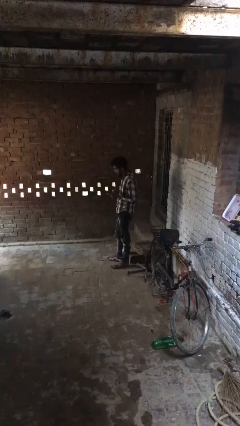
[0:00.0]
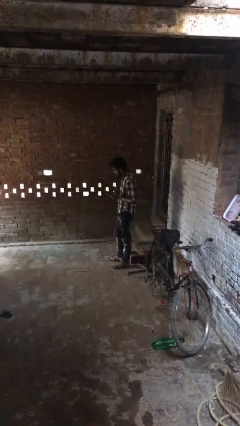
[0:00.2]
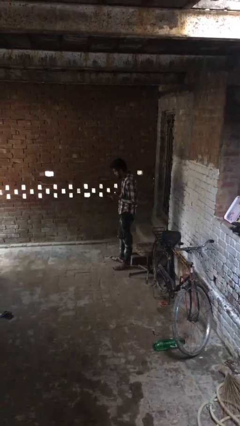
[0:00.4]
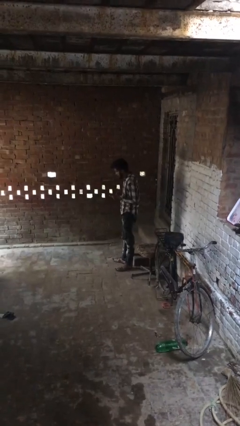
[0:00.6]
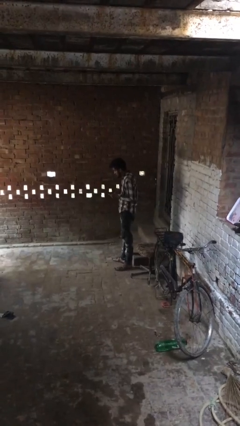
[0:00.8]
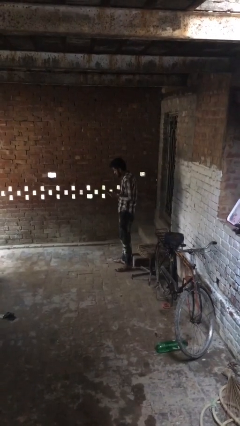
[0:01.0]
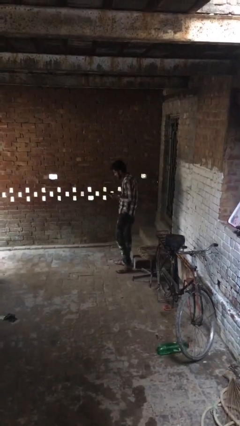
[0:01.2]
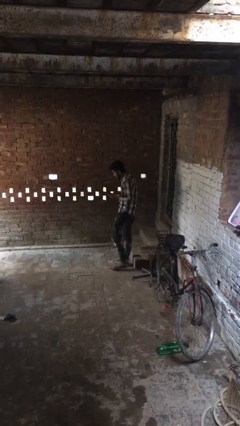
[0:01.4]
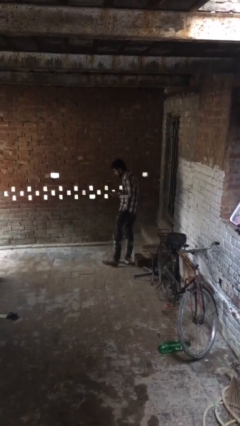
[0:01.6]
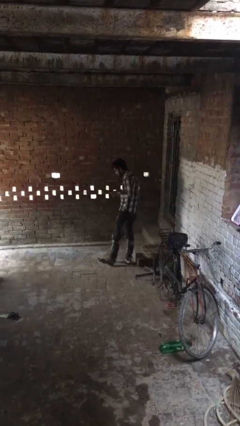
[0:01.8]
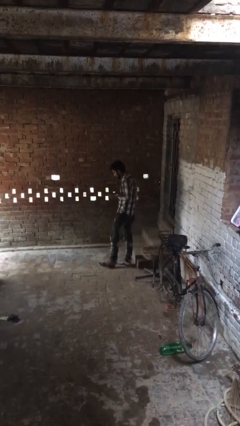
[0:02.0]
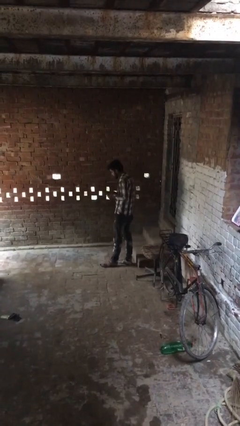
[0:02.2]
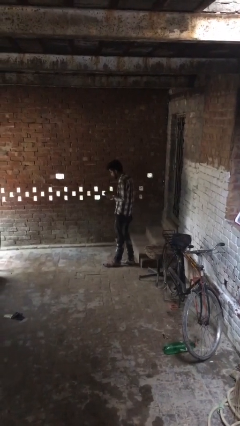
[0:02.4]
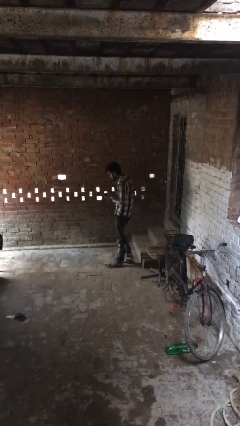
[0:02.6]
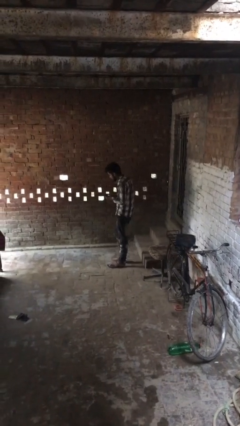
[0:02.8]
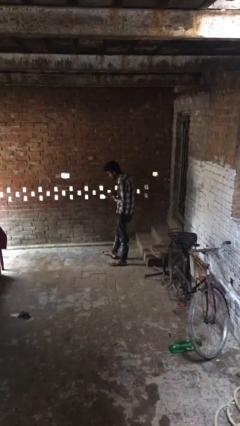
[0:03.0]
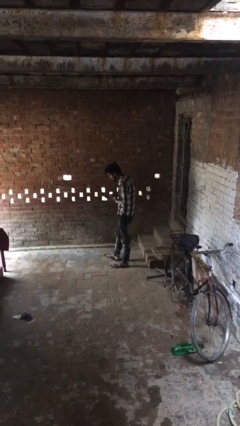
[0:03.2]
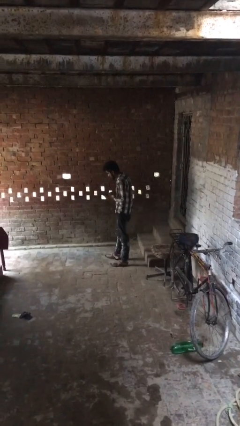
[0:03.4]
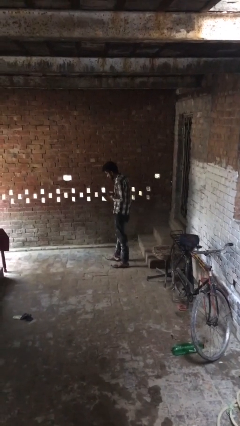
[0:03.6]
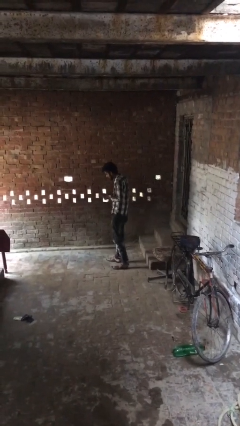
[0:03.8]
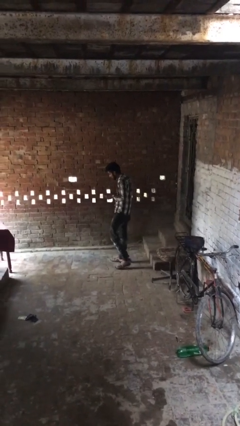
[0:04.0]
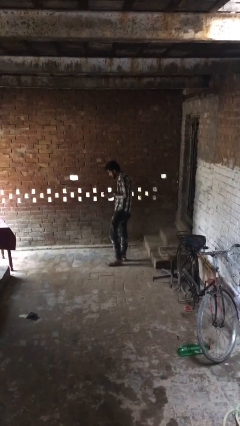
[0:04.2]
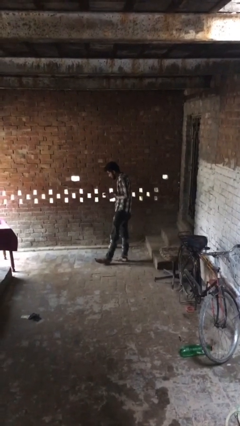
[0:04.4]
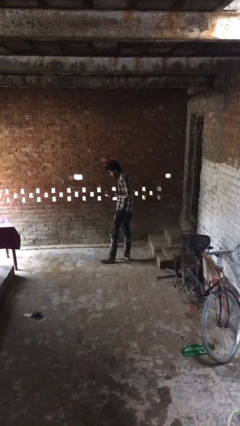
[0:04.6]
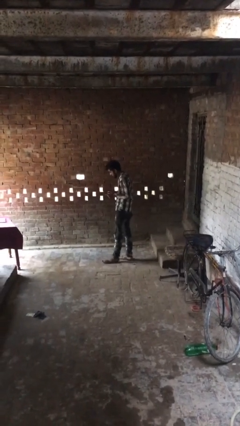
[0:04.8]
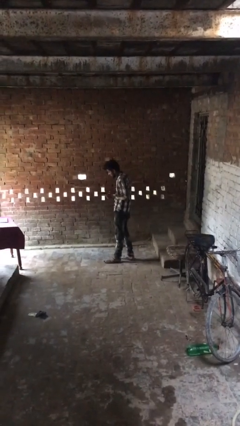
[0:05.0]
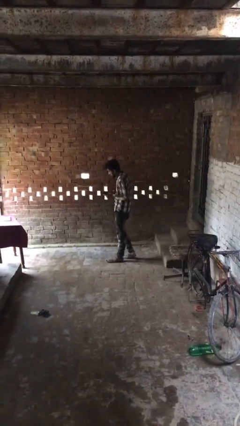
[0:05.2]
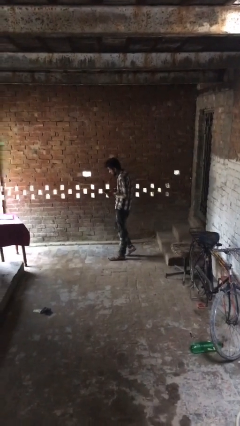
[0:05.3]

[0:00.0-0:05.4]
person texts on phone

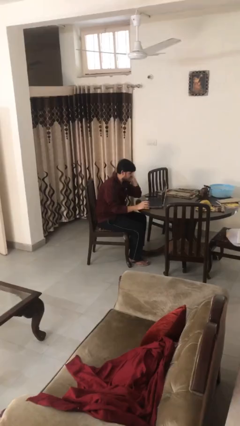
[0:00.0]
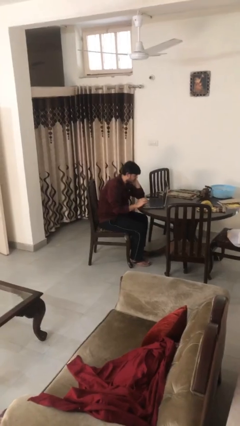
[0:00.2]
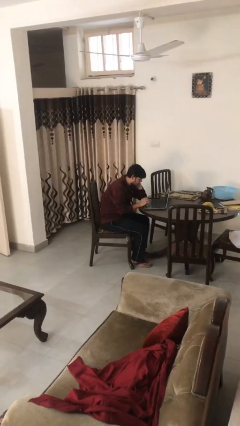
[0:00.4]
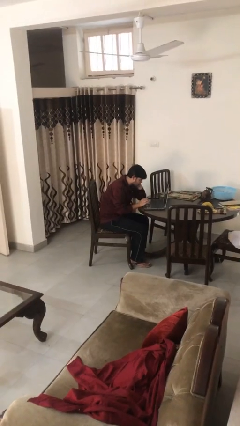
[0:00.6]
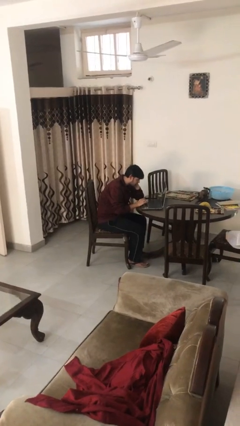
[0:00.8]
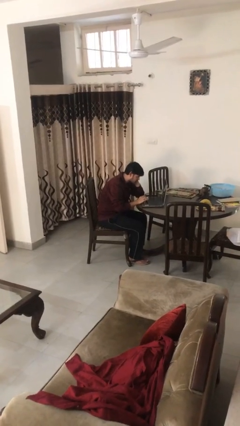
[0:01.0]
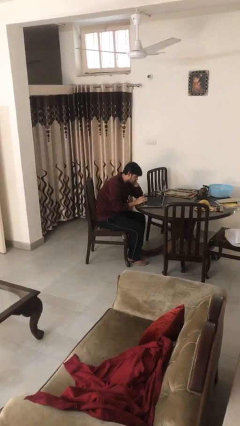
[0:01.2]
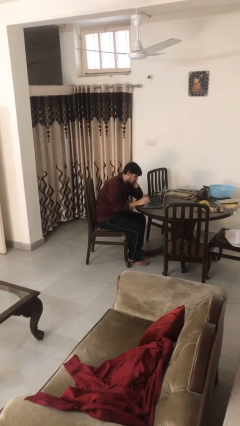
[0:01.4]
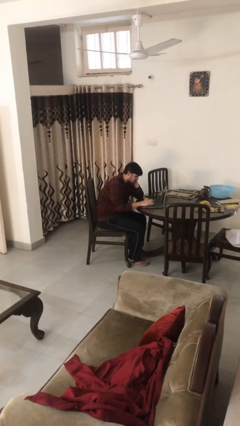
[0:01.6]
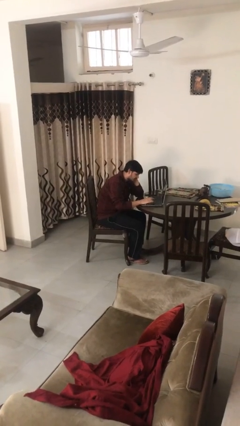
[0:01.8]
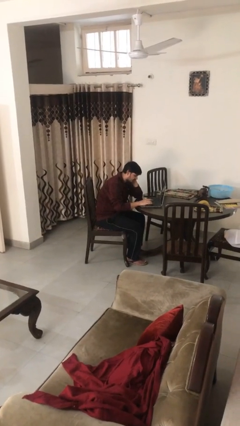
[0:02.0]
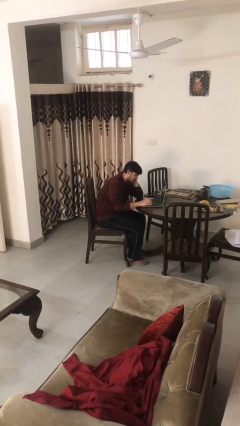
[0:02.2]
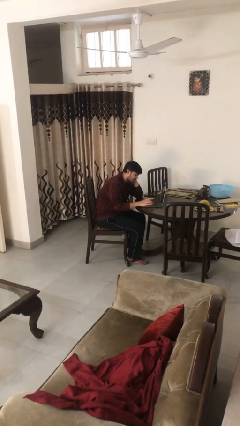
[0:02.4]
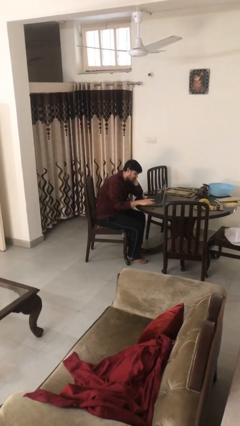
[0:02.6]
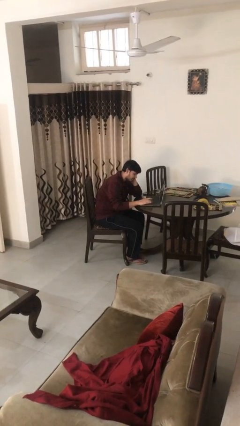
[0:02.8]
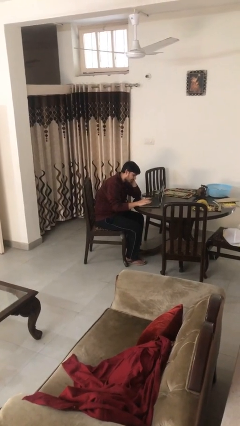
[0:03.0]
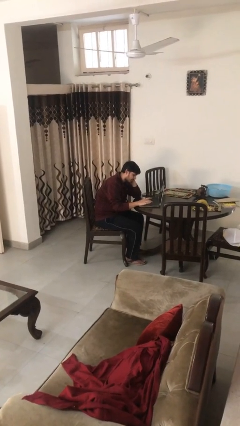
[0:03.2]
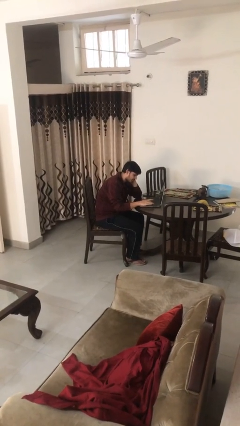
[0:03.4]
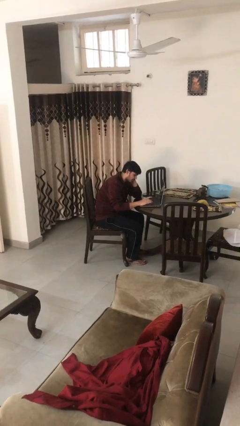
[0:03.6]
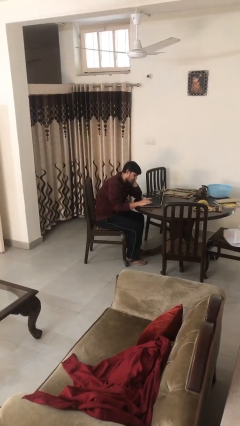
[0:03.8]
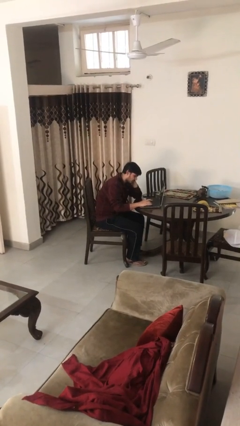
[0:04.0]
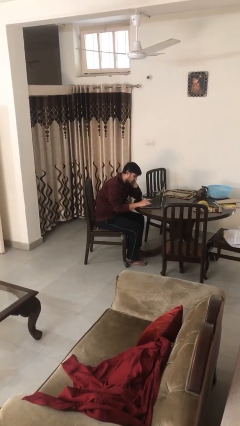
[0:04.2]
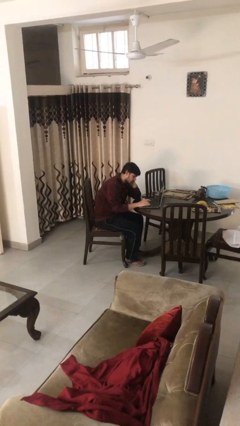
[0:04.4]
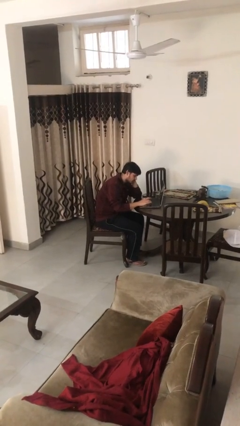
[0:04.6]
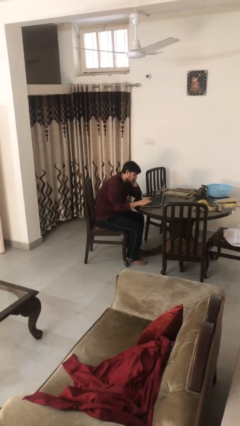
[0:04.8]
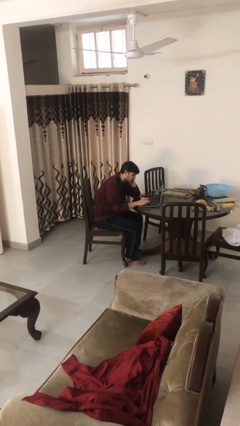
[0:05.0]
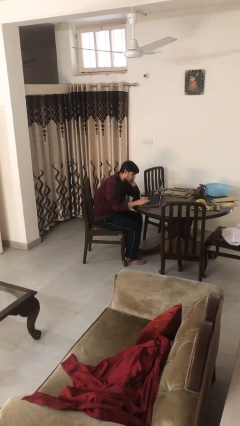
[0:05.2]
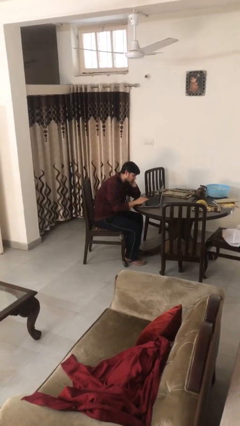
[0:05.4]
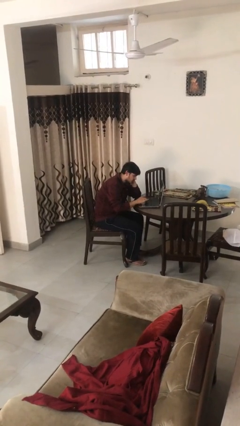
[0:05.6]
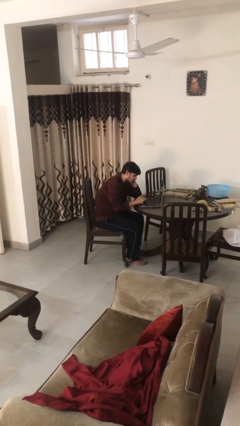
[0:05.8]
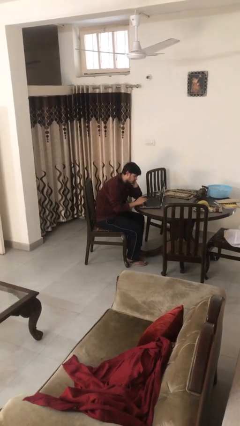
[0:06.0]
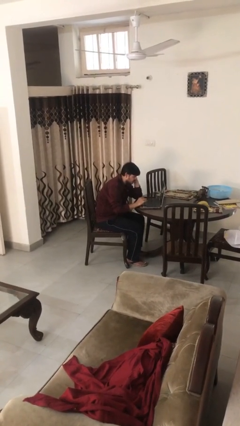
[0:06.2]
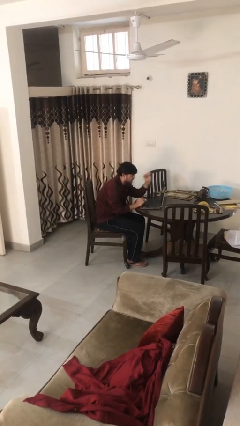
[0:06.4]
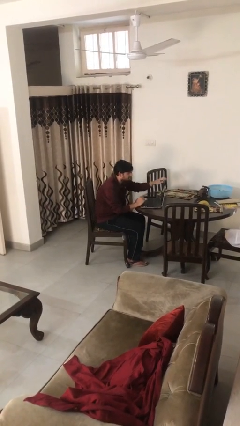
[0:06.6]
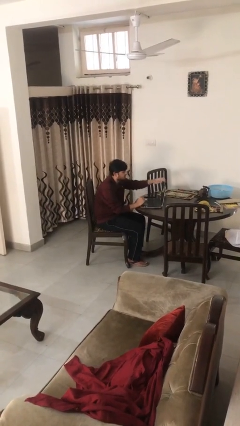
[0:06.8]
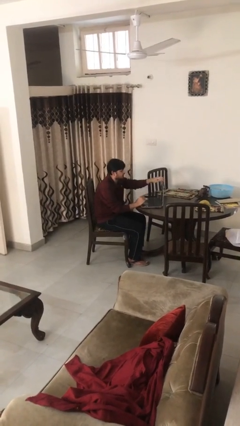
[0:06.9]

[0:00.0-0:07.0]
person interacts with laptop

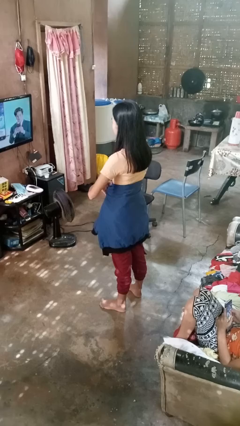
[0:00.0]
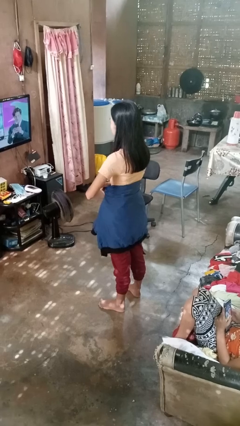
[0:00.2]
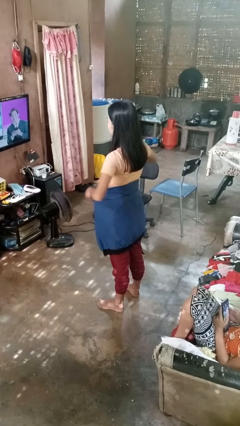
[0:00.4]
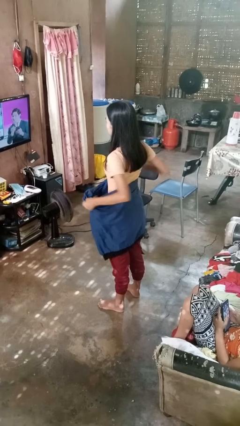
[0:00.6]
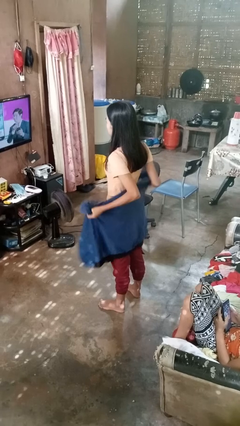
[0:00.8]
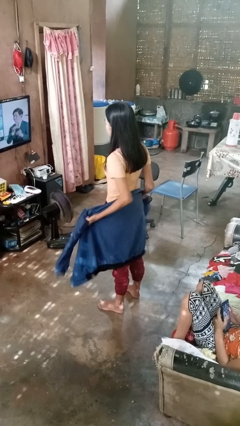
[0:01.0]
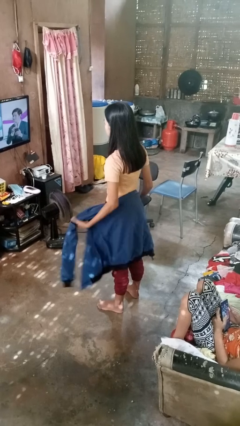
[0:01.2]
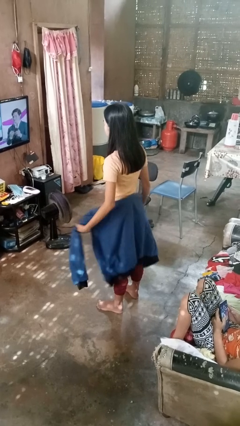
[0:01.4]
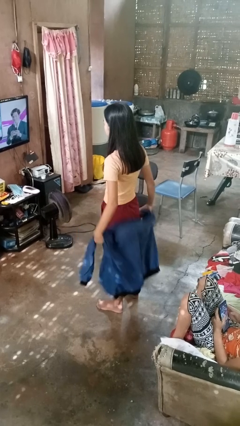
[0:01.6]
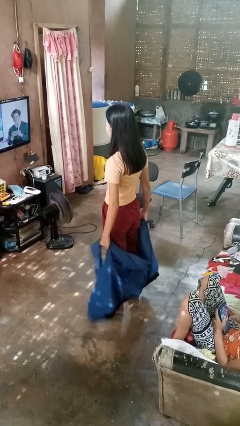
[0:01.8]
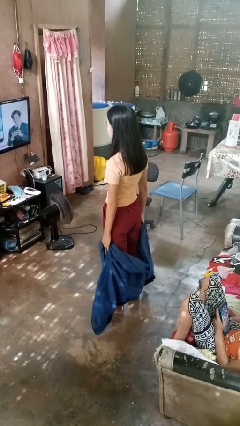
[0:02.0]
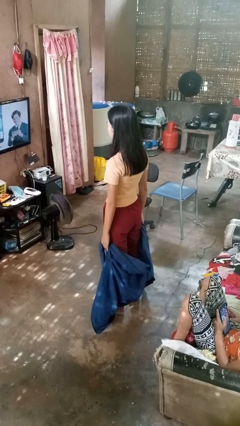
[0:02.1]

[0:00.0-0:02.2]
person unties jacket around waist

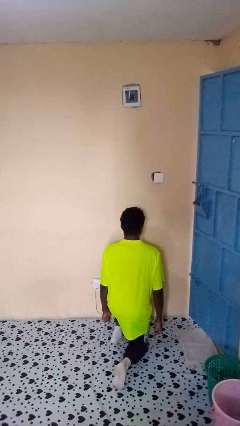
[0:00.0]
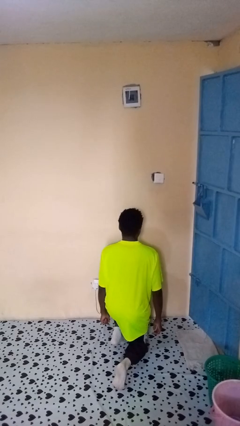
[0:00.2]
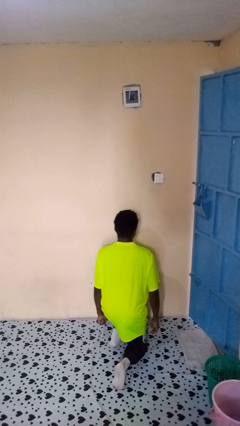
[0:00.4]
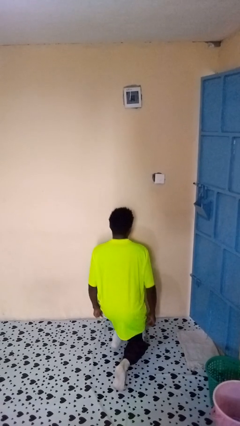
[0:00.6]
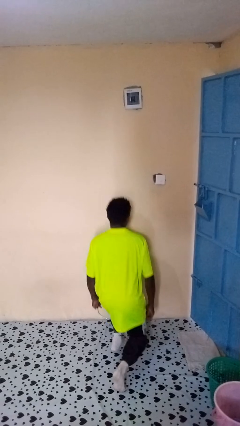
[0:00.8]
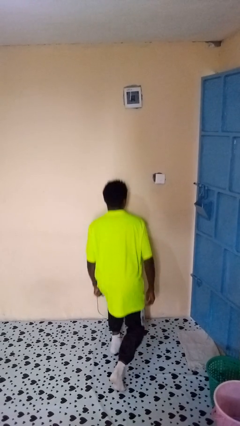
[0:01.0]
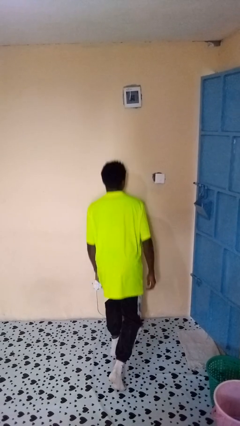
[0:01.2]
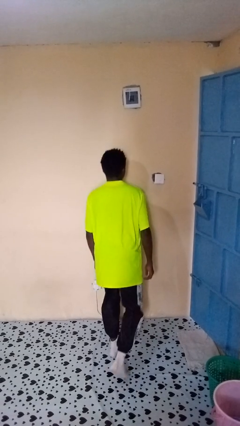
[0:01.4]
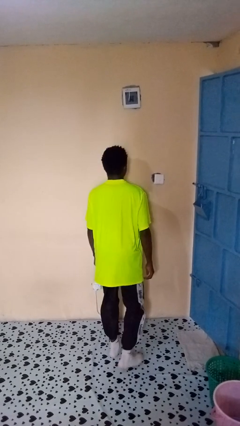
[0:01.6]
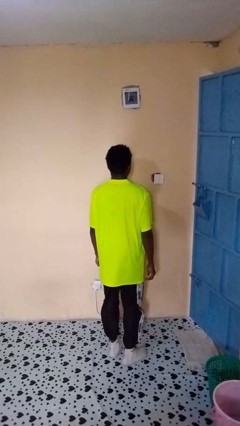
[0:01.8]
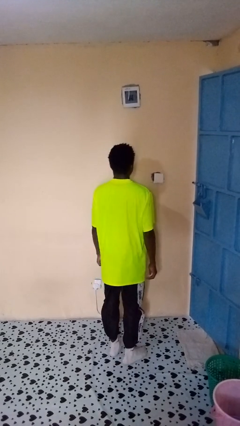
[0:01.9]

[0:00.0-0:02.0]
person stands up from floor

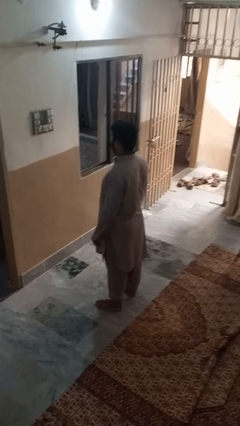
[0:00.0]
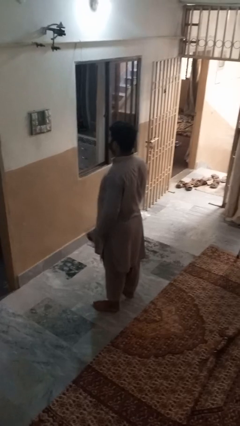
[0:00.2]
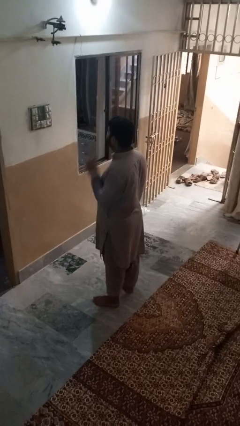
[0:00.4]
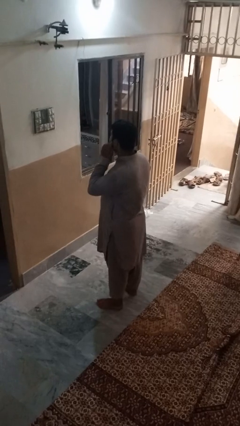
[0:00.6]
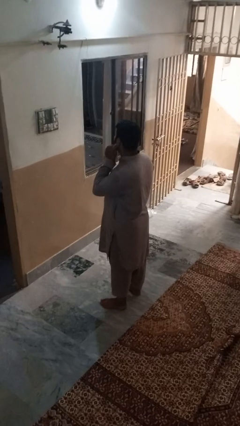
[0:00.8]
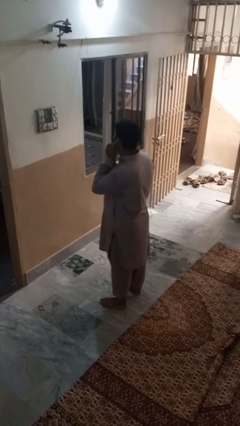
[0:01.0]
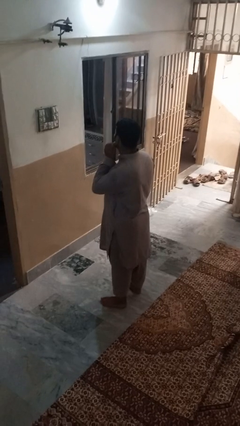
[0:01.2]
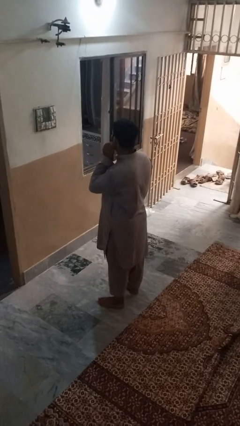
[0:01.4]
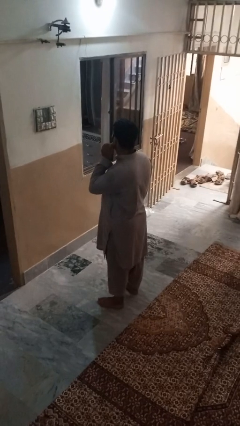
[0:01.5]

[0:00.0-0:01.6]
person touches earlobe
